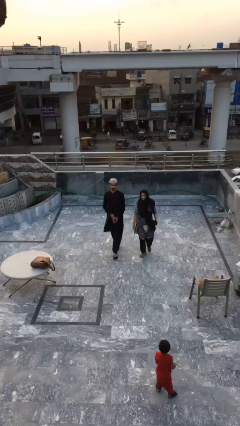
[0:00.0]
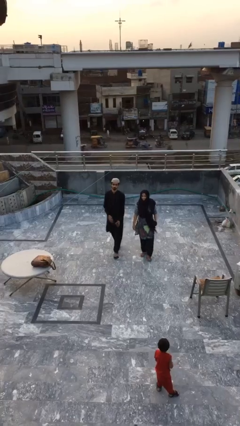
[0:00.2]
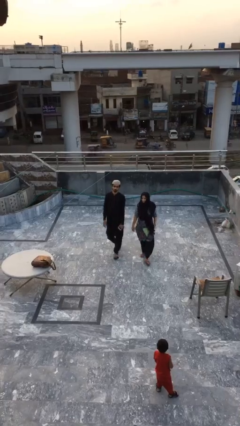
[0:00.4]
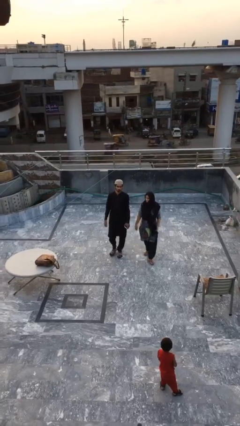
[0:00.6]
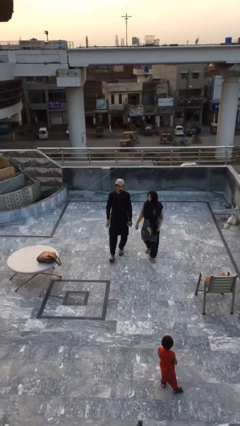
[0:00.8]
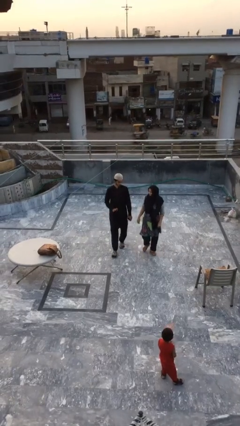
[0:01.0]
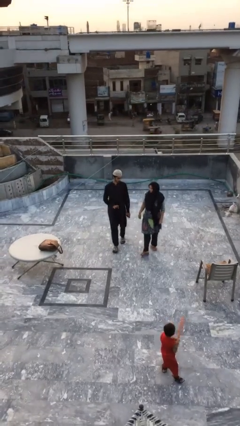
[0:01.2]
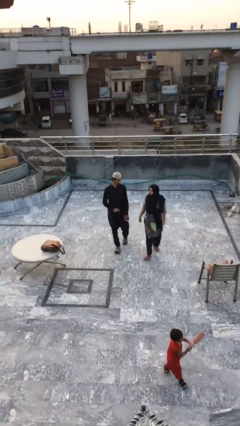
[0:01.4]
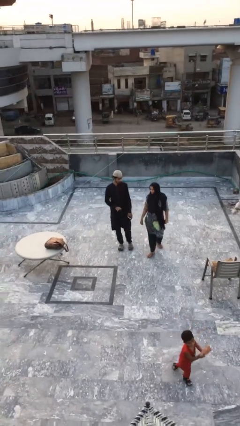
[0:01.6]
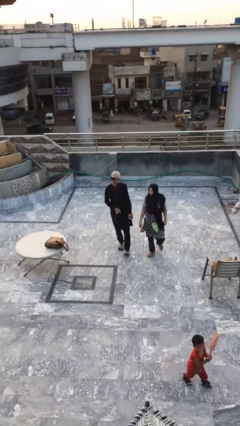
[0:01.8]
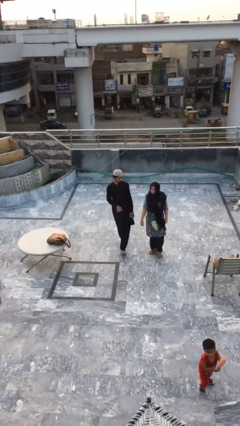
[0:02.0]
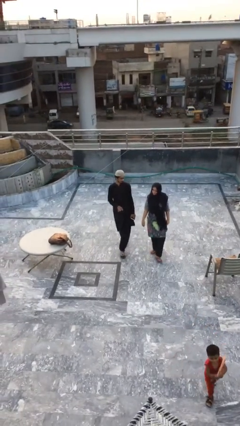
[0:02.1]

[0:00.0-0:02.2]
person talks to person

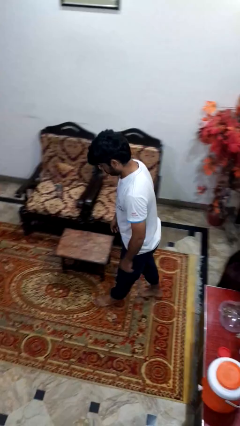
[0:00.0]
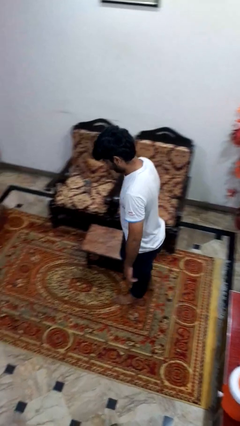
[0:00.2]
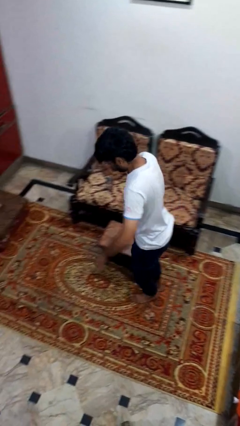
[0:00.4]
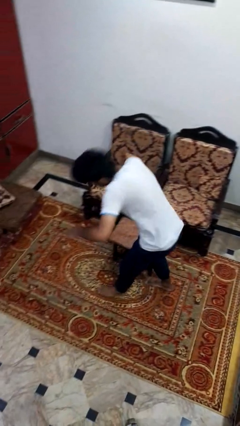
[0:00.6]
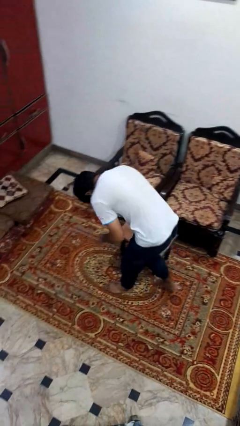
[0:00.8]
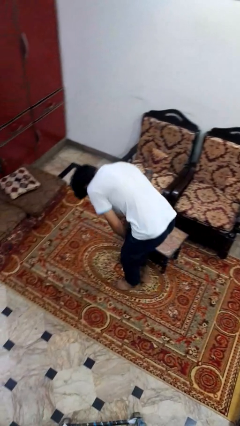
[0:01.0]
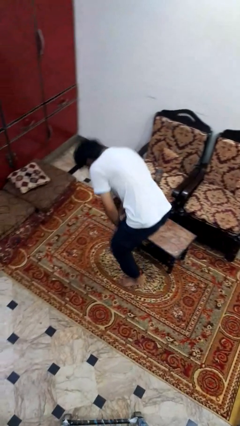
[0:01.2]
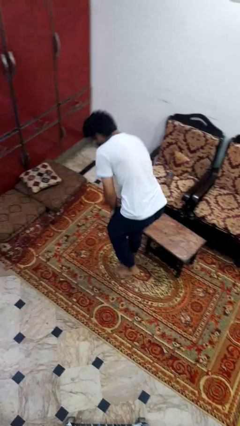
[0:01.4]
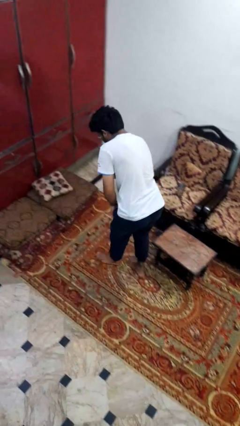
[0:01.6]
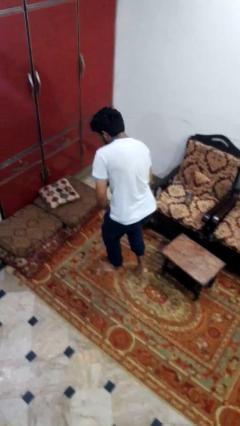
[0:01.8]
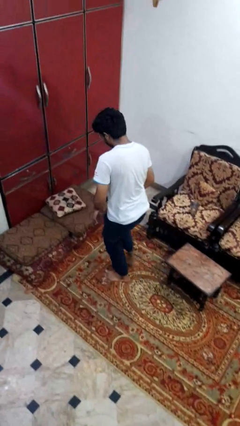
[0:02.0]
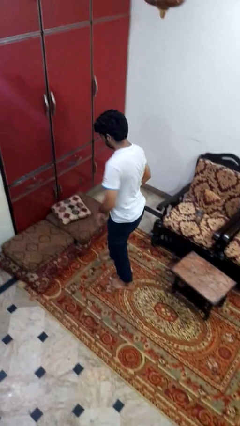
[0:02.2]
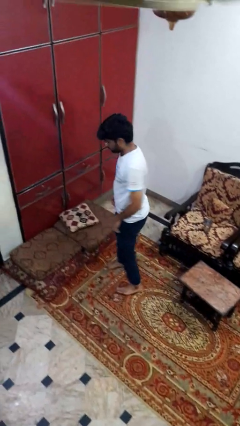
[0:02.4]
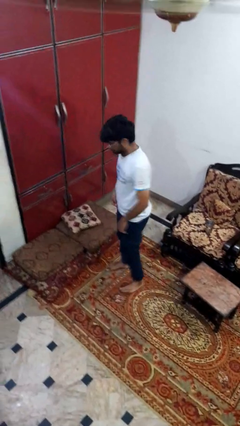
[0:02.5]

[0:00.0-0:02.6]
person bumps into table

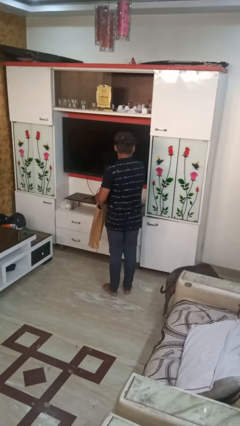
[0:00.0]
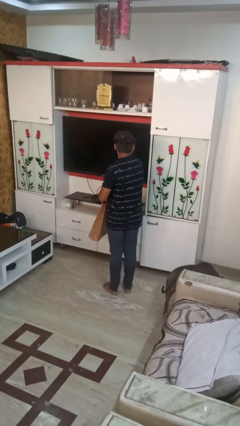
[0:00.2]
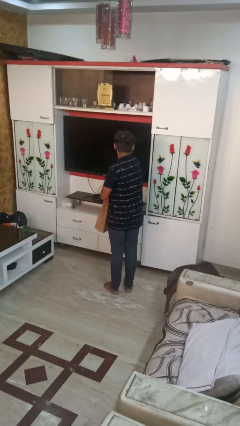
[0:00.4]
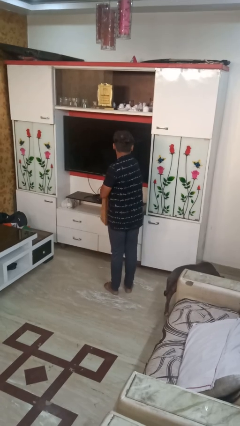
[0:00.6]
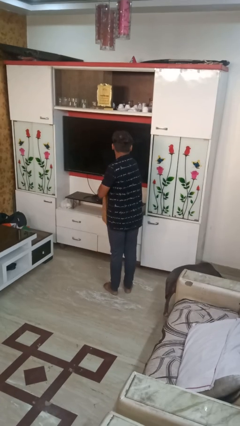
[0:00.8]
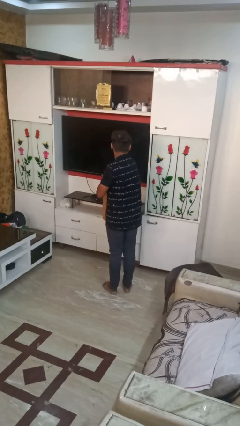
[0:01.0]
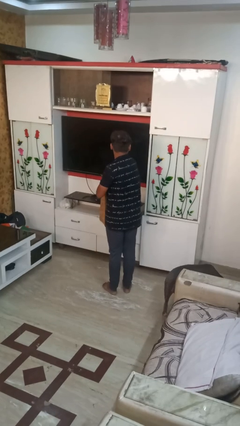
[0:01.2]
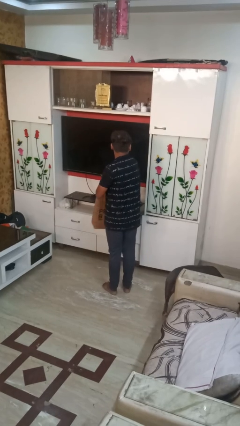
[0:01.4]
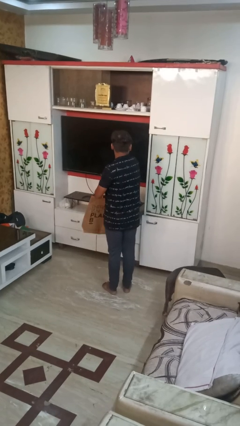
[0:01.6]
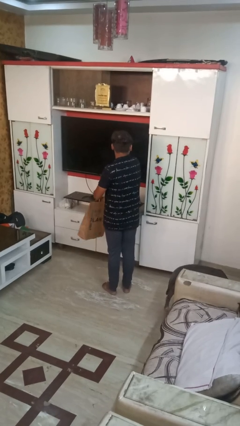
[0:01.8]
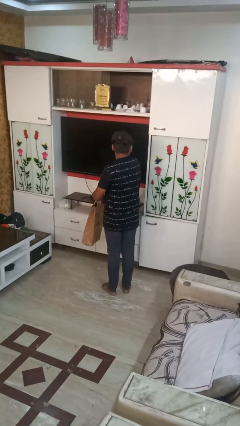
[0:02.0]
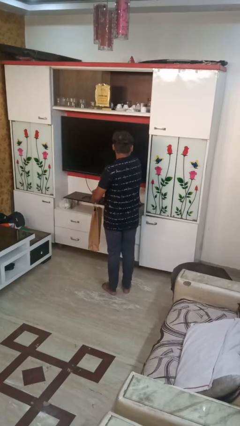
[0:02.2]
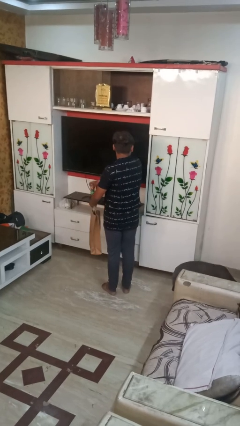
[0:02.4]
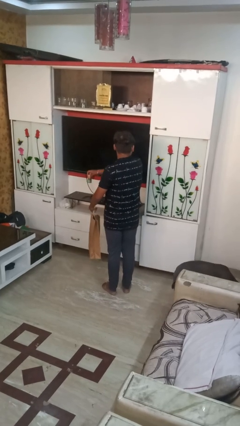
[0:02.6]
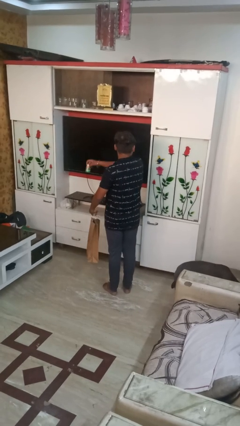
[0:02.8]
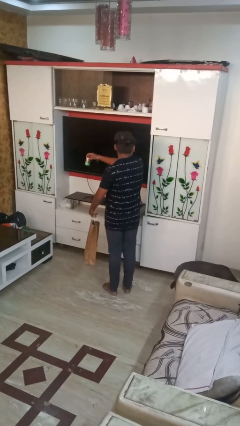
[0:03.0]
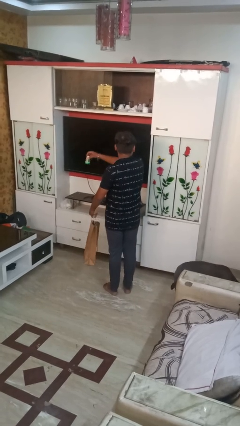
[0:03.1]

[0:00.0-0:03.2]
person takes object from bag

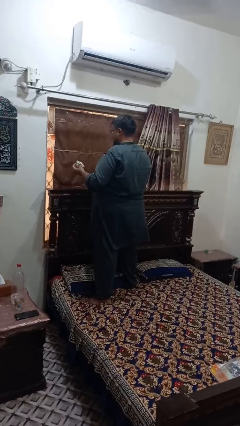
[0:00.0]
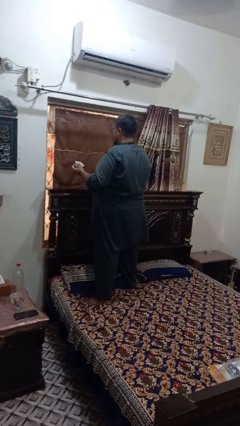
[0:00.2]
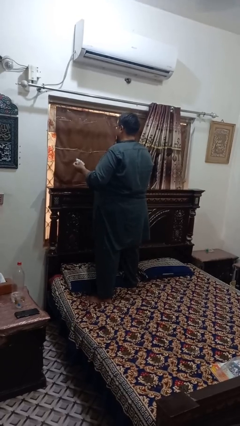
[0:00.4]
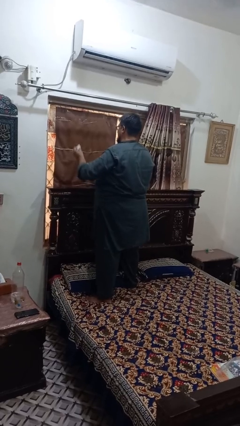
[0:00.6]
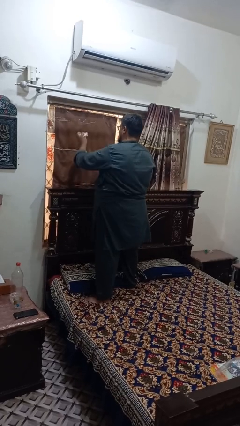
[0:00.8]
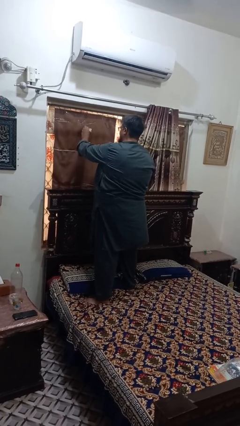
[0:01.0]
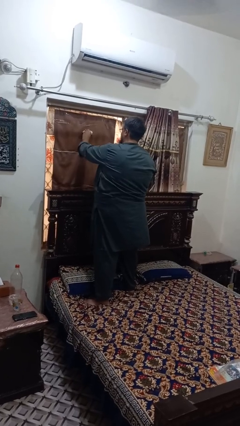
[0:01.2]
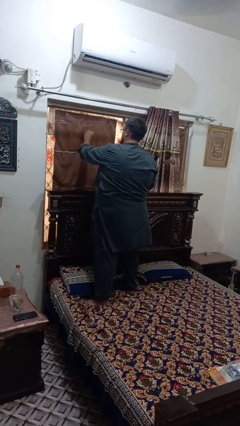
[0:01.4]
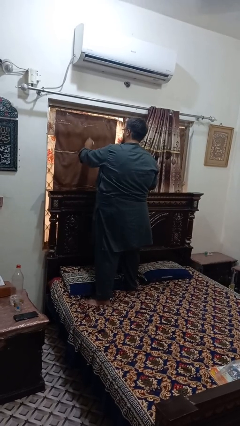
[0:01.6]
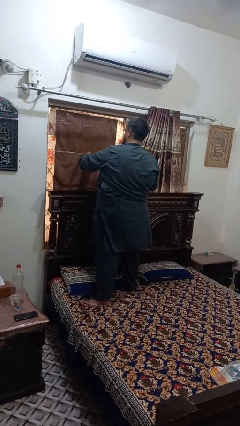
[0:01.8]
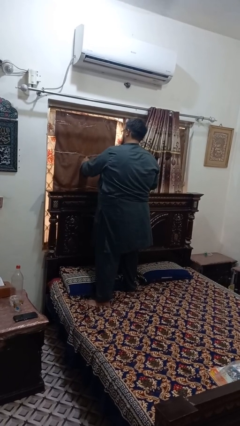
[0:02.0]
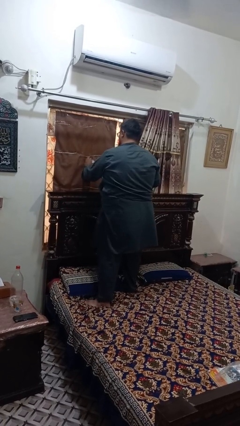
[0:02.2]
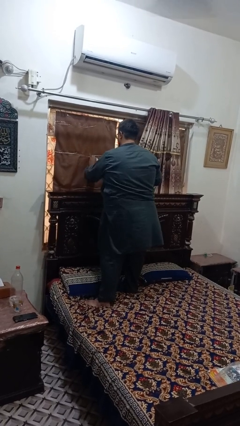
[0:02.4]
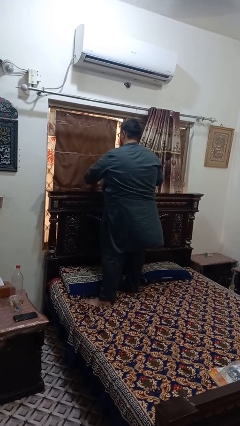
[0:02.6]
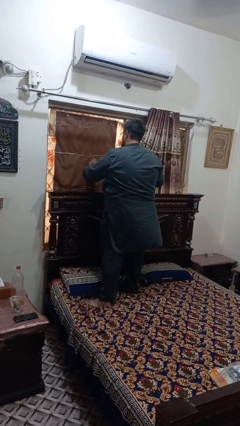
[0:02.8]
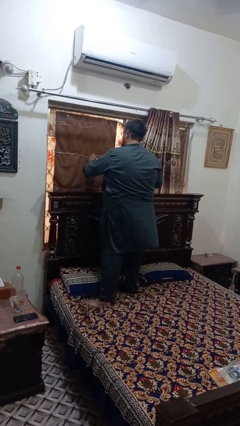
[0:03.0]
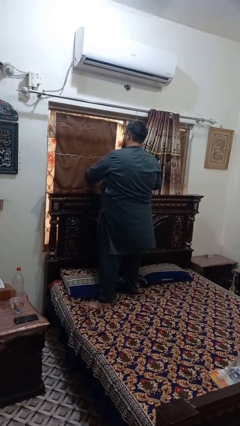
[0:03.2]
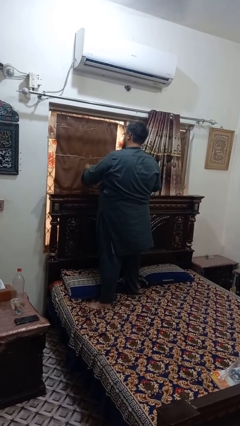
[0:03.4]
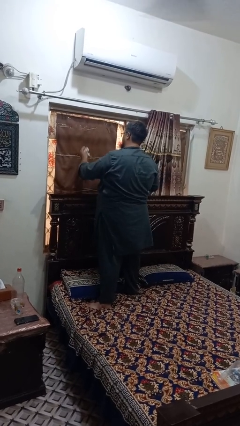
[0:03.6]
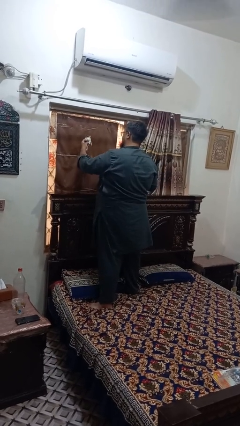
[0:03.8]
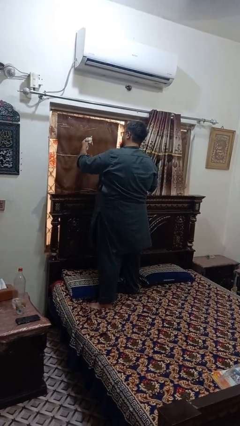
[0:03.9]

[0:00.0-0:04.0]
person washes window

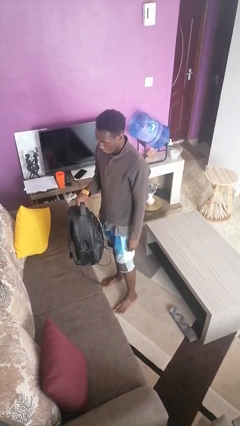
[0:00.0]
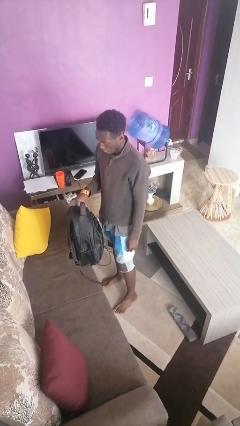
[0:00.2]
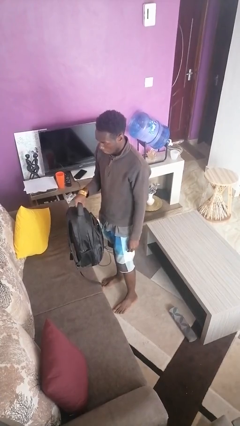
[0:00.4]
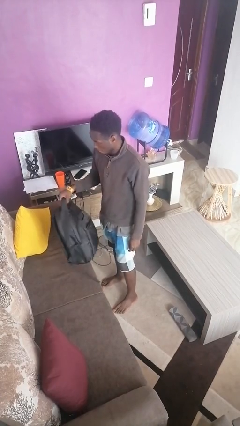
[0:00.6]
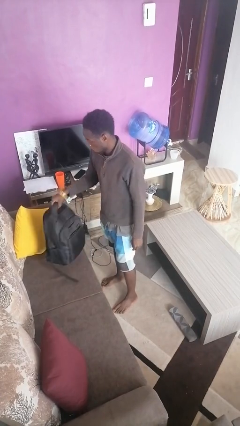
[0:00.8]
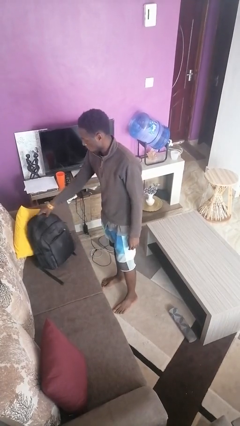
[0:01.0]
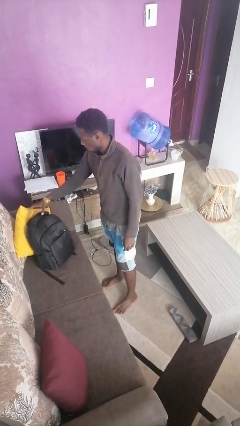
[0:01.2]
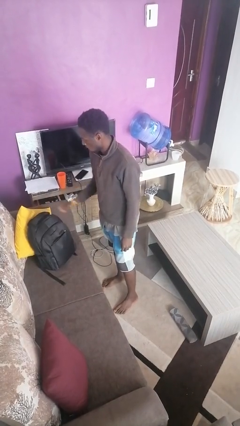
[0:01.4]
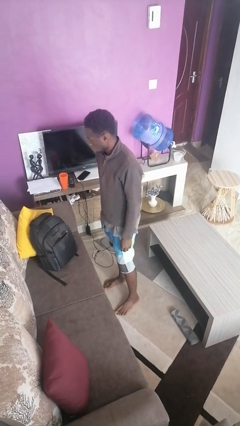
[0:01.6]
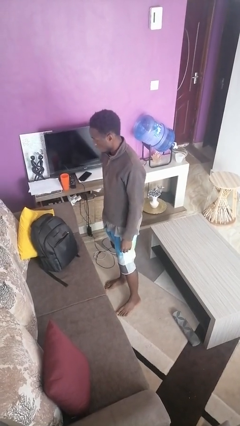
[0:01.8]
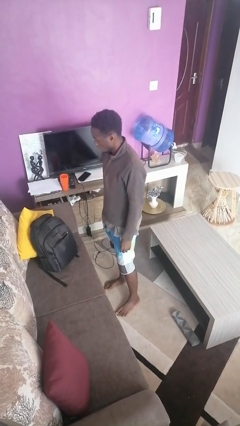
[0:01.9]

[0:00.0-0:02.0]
person puts down object on couch

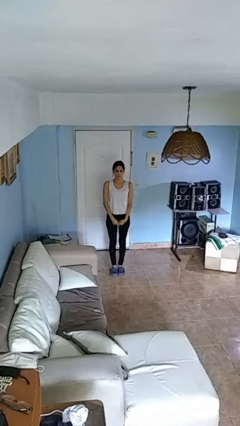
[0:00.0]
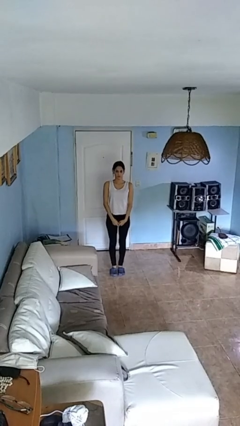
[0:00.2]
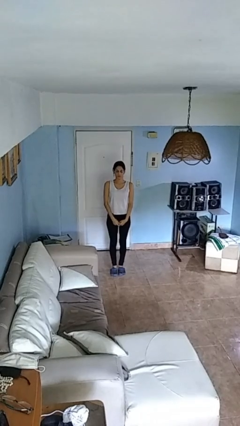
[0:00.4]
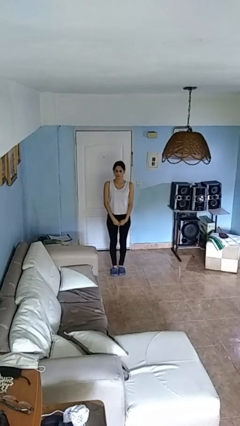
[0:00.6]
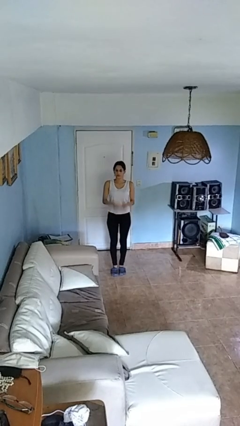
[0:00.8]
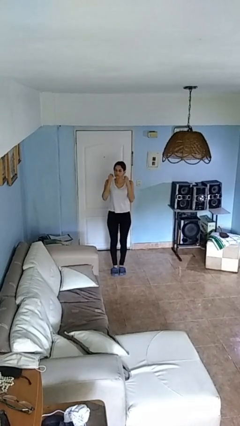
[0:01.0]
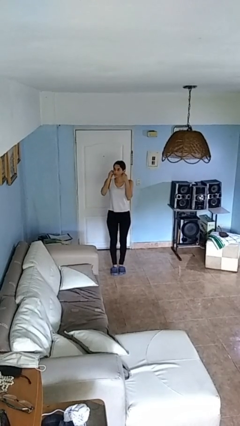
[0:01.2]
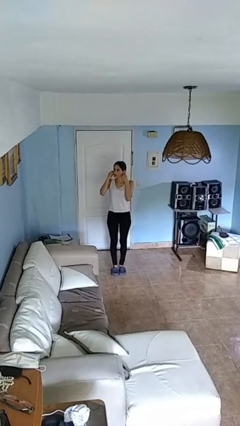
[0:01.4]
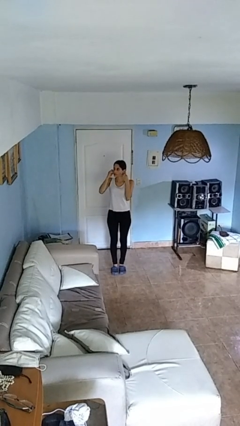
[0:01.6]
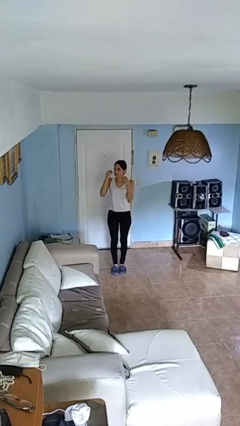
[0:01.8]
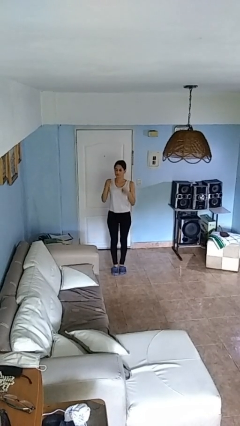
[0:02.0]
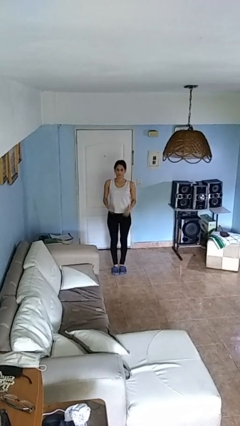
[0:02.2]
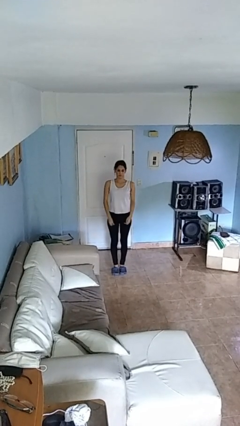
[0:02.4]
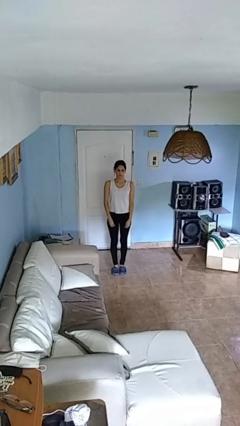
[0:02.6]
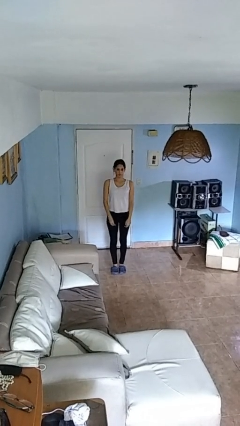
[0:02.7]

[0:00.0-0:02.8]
person takes off necklace

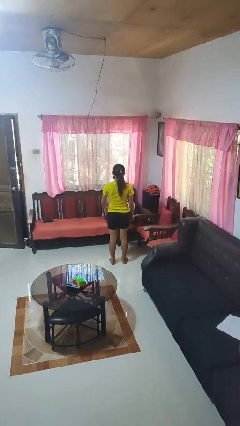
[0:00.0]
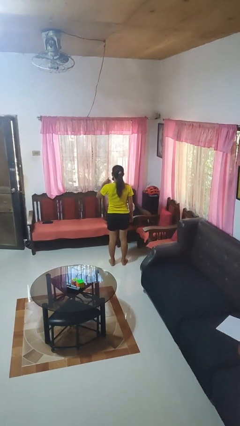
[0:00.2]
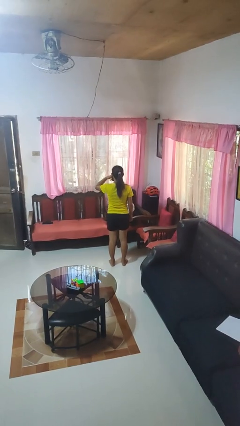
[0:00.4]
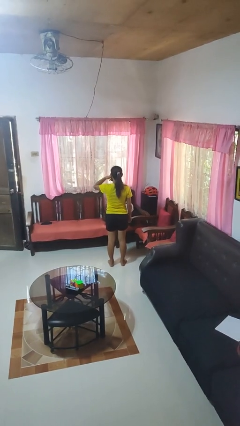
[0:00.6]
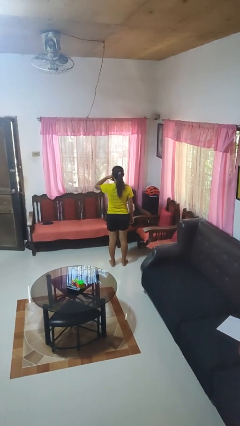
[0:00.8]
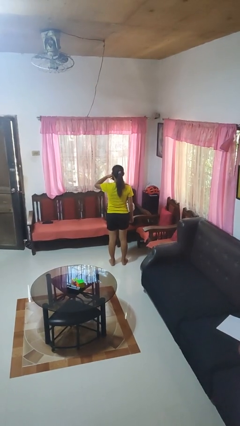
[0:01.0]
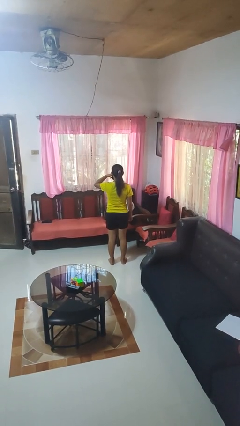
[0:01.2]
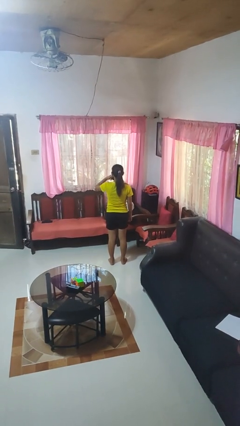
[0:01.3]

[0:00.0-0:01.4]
person gestures call me
